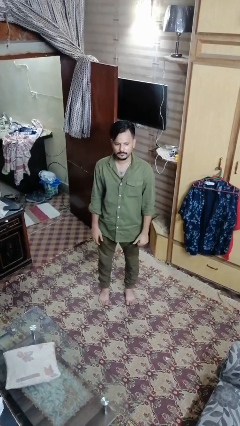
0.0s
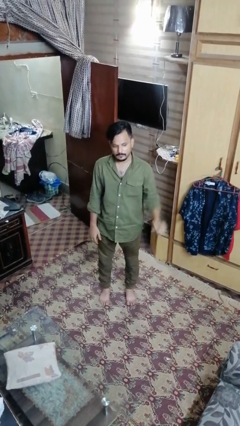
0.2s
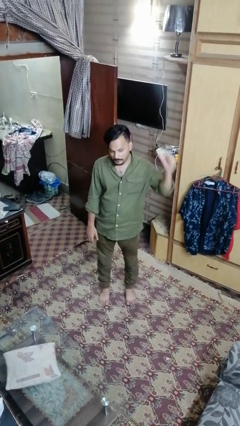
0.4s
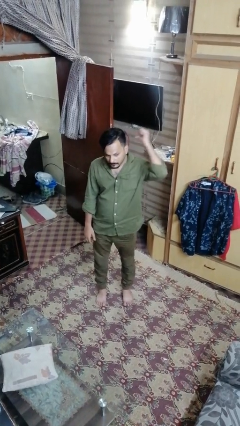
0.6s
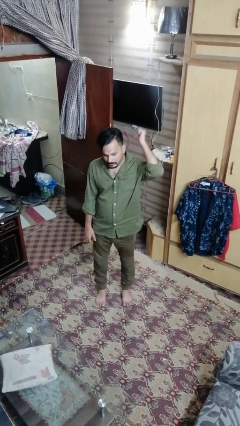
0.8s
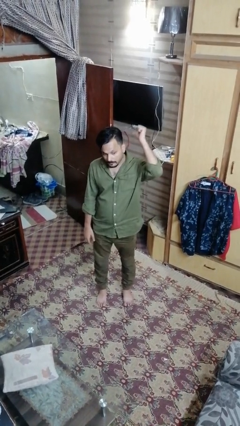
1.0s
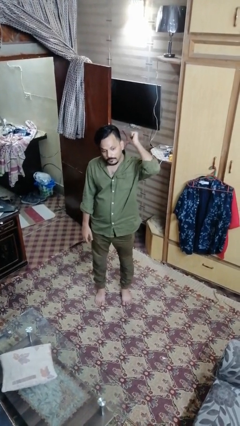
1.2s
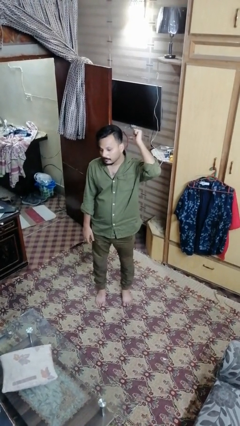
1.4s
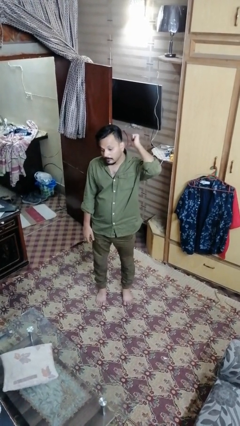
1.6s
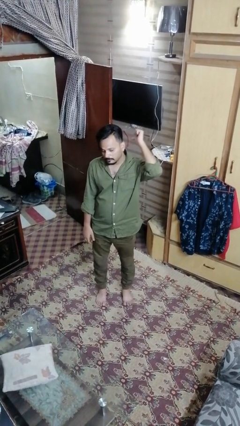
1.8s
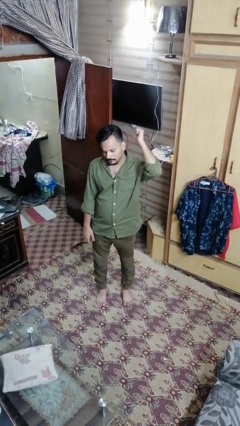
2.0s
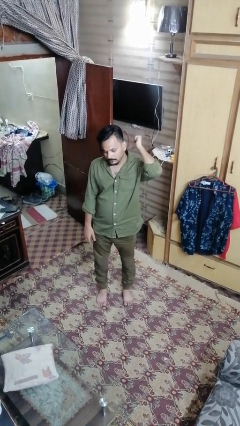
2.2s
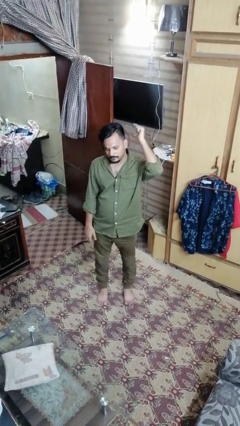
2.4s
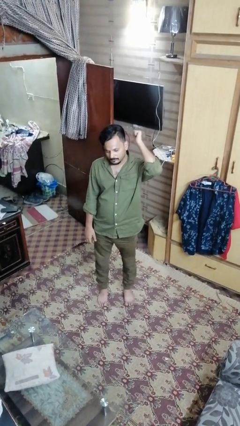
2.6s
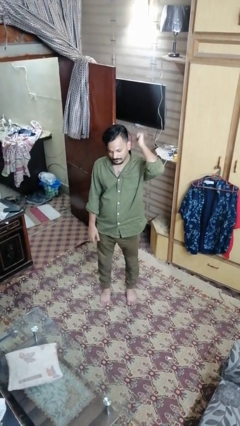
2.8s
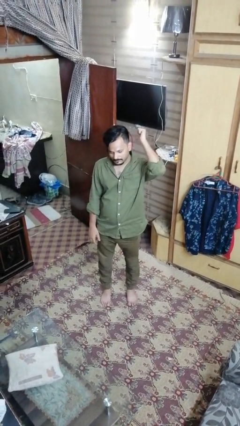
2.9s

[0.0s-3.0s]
person gestures behind me

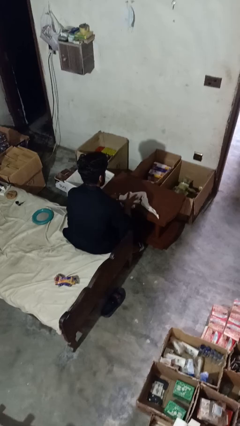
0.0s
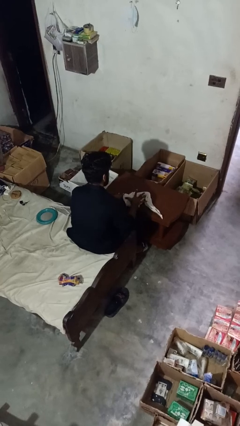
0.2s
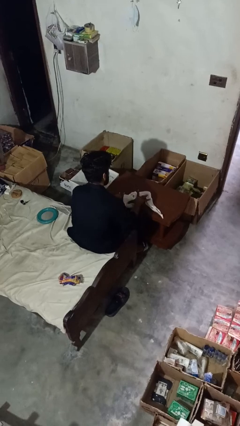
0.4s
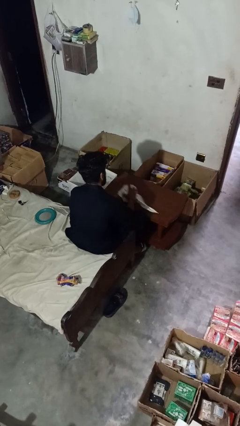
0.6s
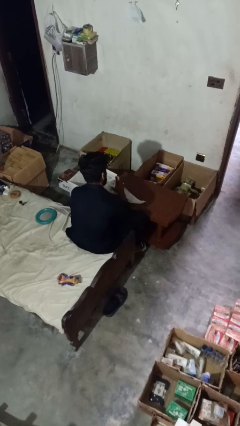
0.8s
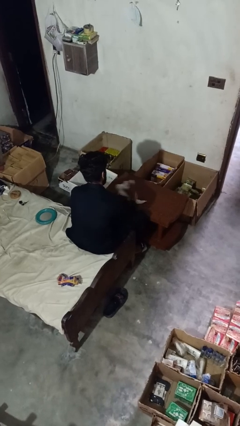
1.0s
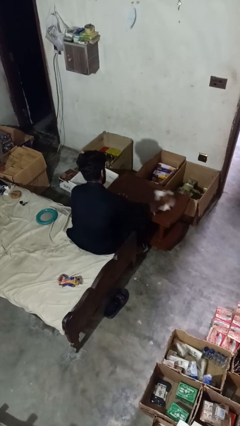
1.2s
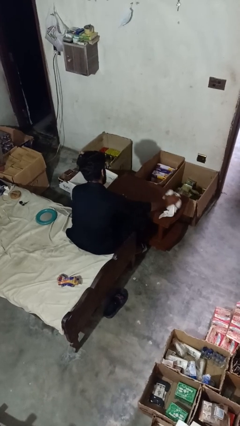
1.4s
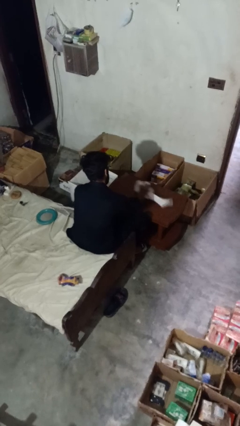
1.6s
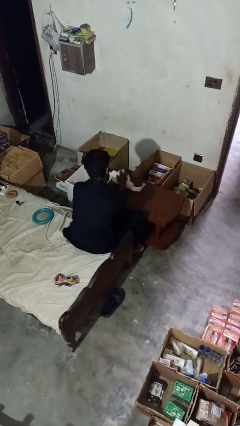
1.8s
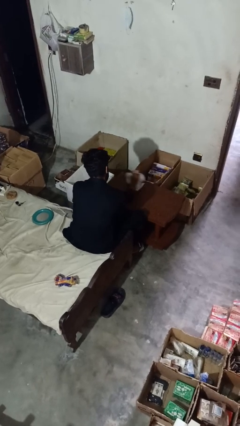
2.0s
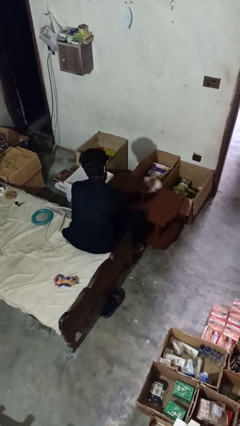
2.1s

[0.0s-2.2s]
person cleans table with rag

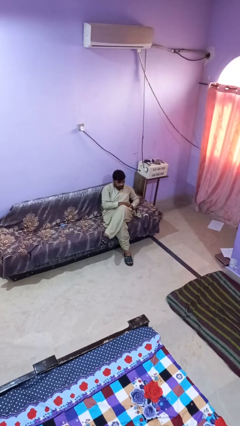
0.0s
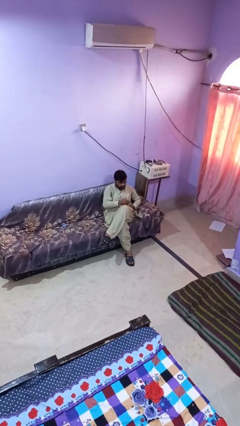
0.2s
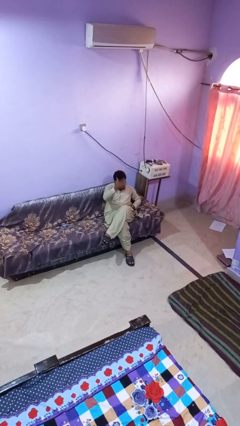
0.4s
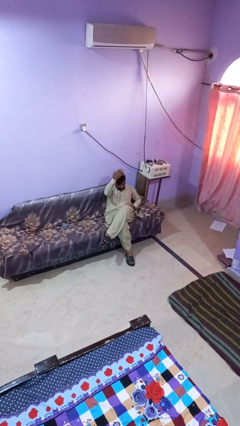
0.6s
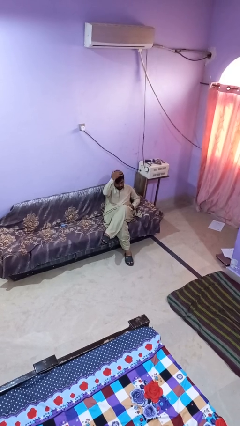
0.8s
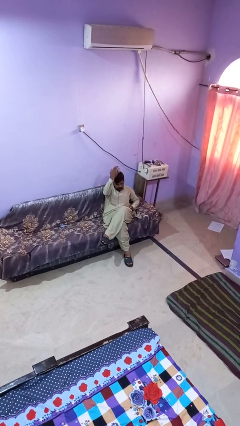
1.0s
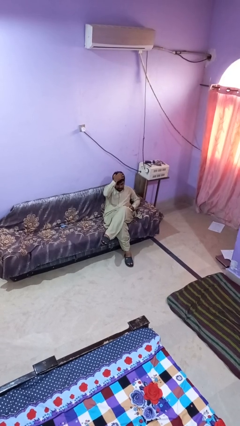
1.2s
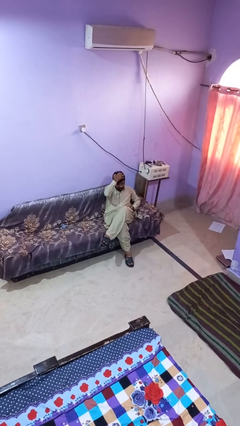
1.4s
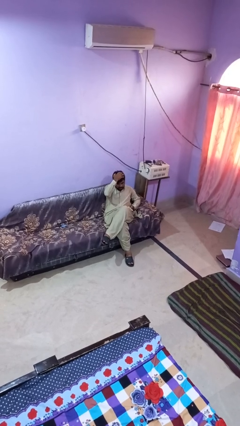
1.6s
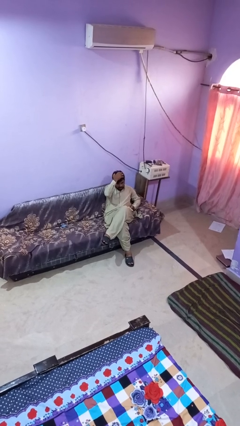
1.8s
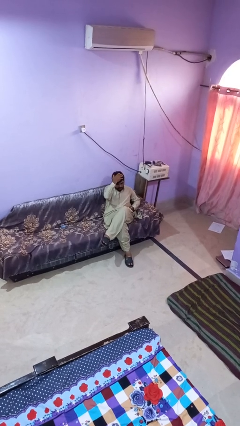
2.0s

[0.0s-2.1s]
person pats head

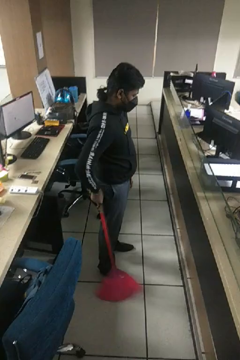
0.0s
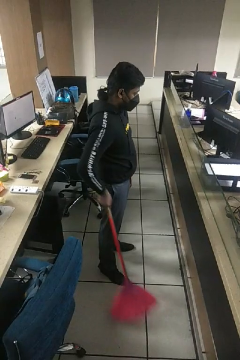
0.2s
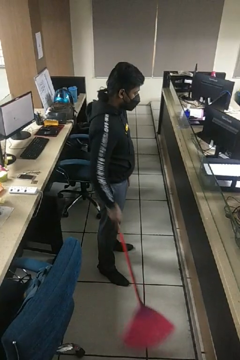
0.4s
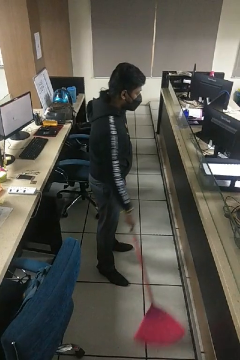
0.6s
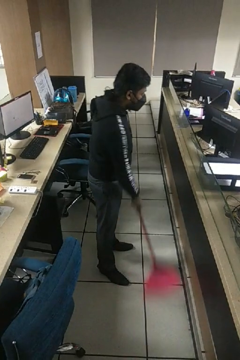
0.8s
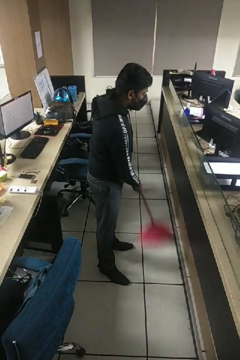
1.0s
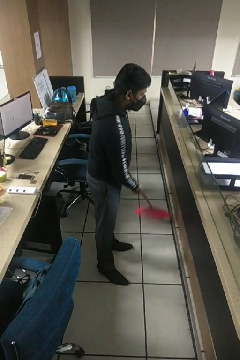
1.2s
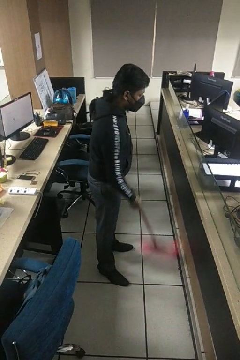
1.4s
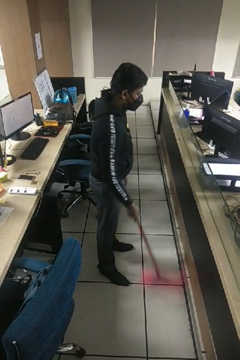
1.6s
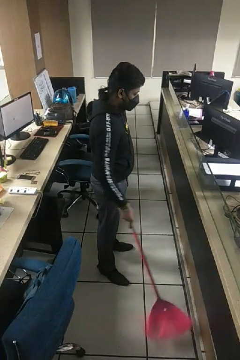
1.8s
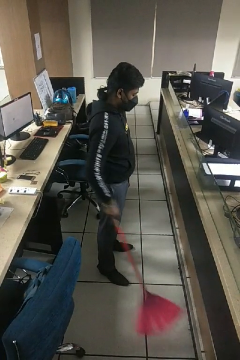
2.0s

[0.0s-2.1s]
person sweeps floor

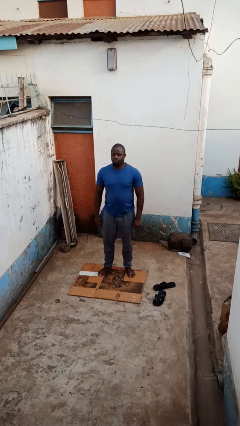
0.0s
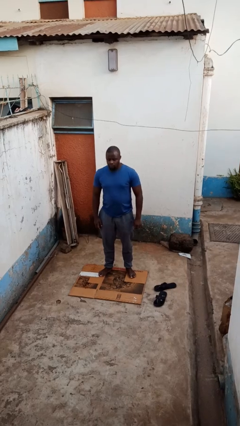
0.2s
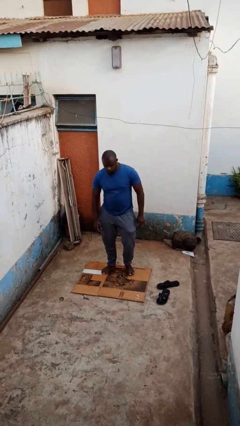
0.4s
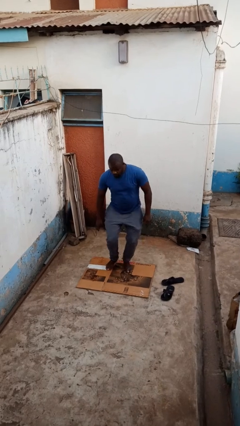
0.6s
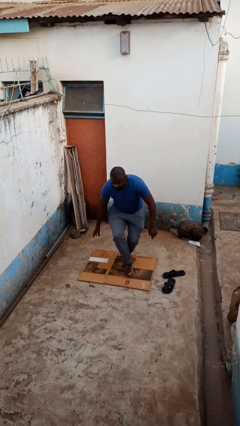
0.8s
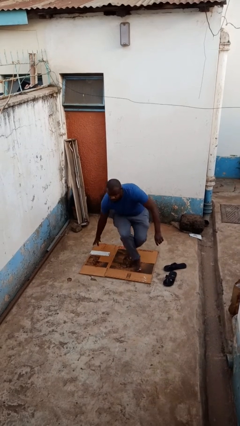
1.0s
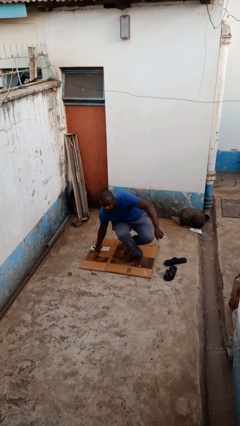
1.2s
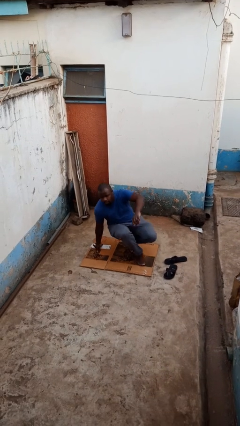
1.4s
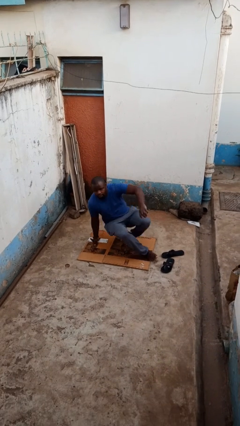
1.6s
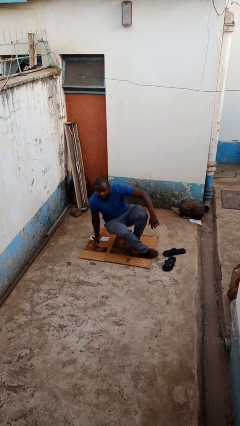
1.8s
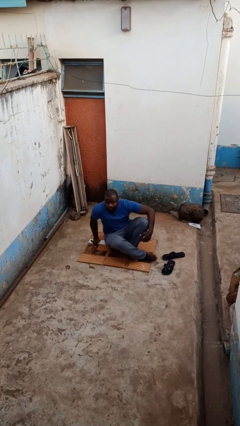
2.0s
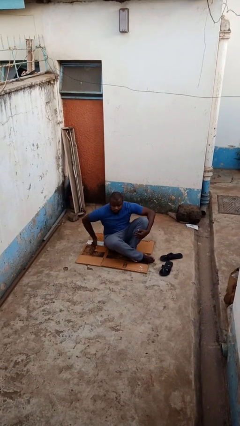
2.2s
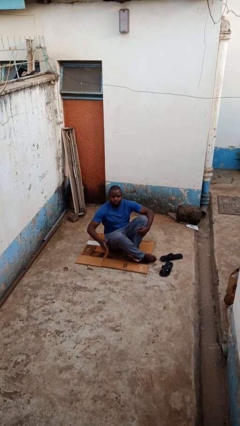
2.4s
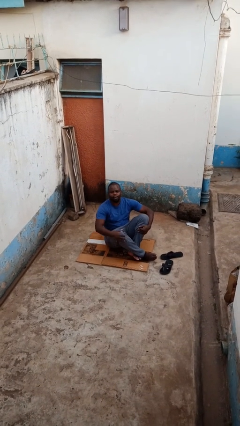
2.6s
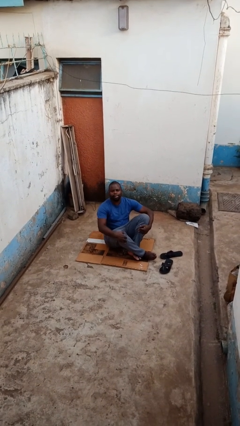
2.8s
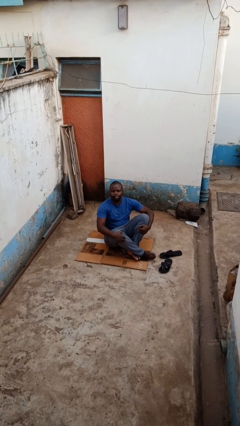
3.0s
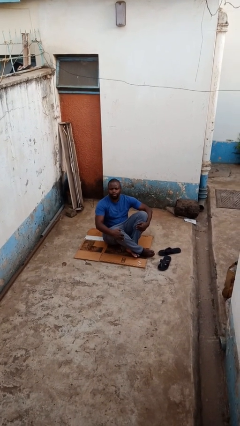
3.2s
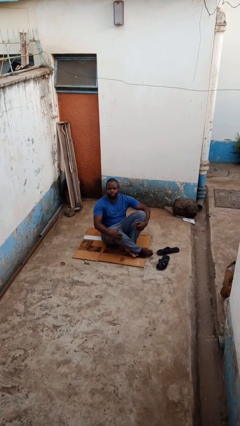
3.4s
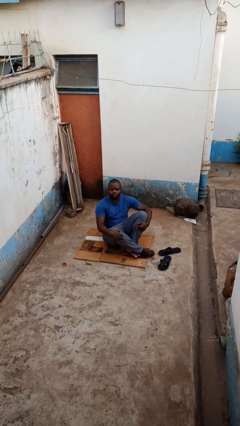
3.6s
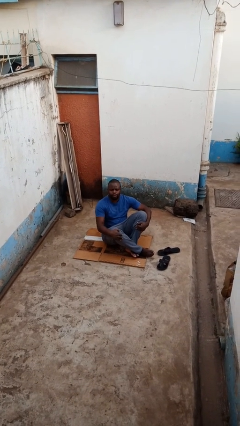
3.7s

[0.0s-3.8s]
person sits crisscross

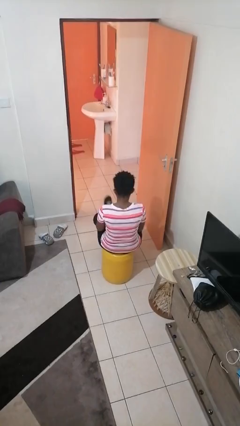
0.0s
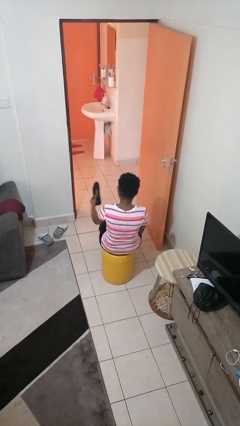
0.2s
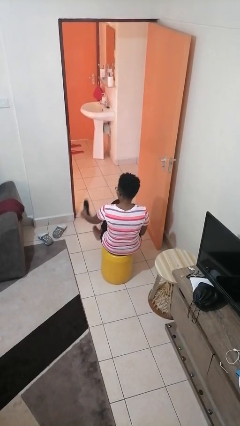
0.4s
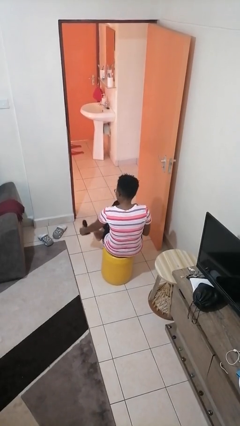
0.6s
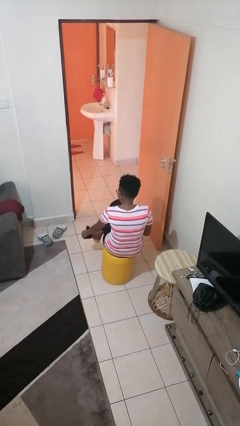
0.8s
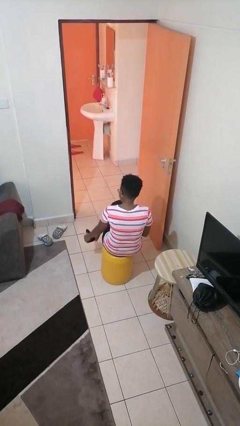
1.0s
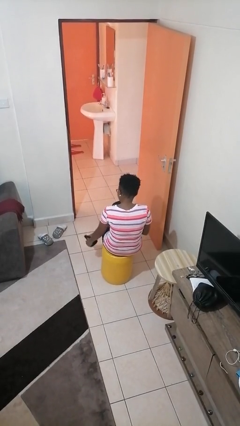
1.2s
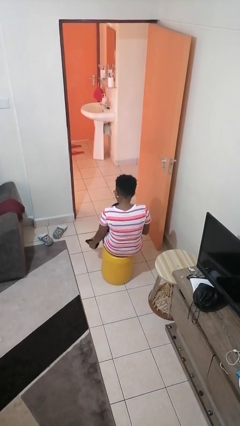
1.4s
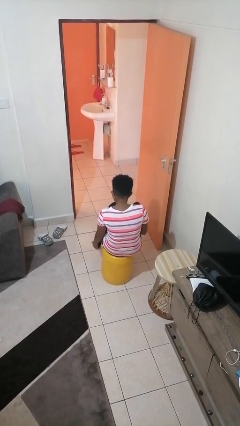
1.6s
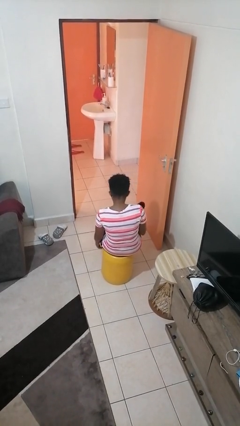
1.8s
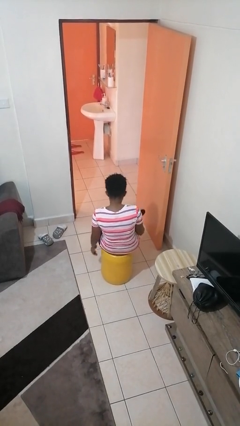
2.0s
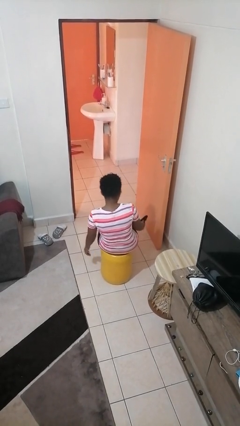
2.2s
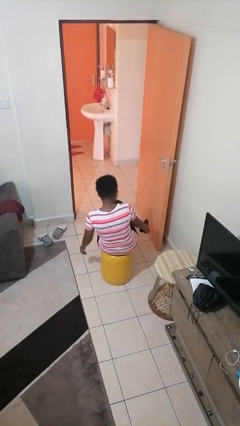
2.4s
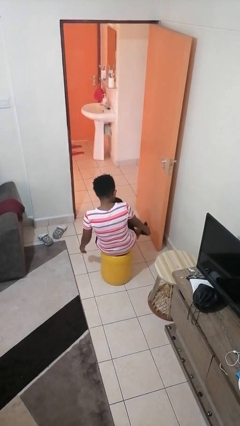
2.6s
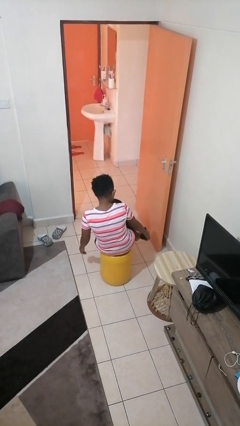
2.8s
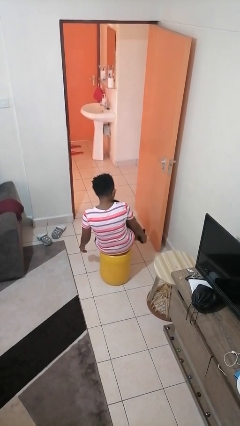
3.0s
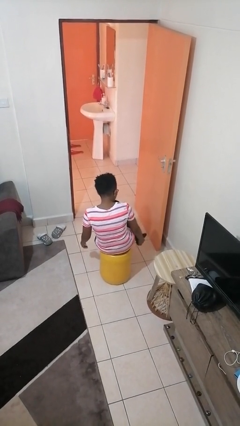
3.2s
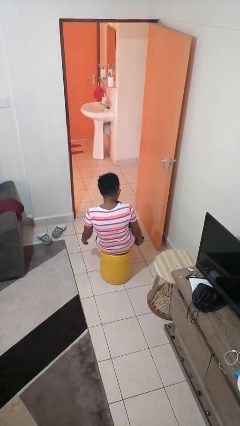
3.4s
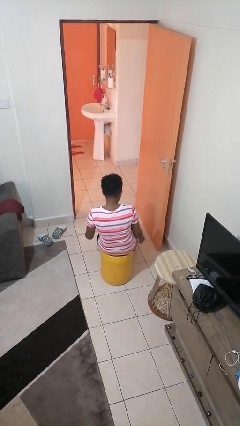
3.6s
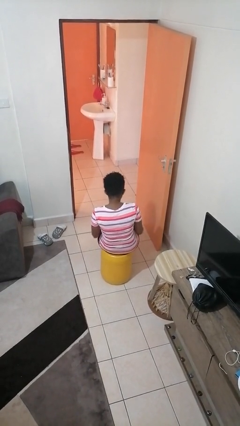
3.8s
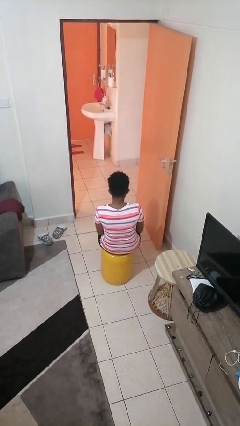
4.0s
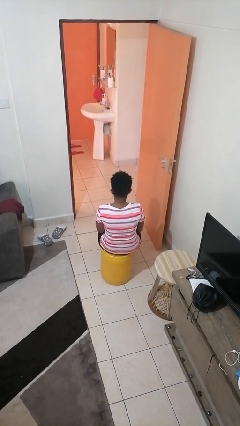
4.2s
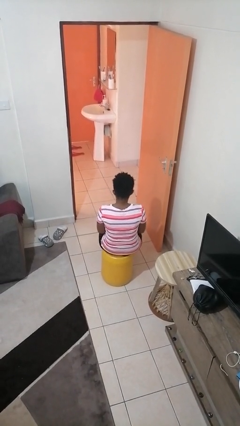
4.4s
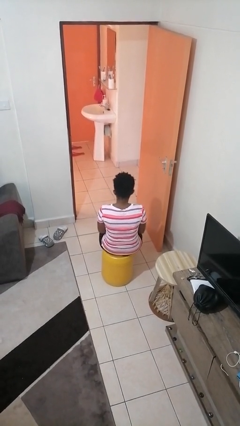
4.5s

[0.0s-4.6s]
person puts on shoes

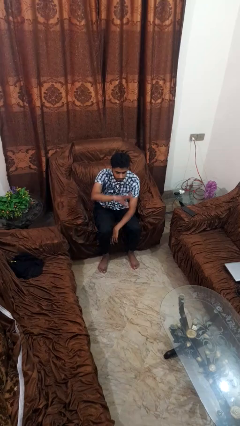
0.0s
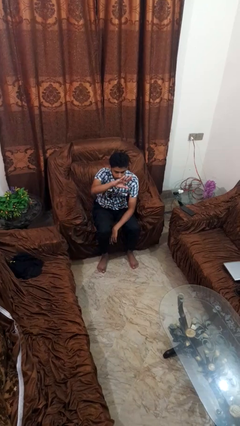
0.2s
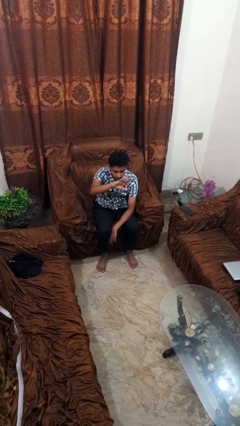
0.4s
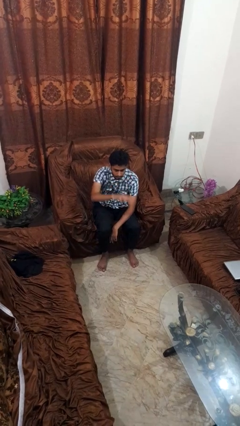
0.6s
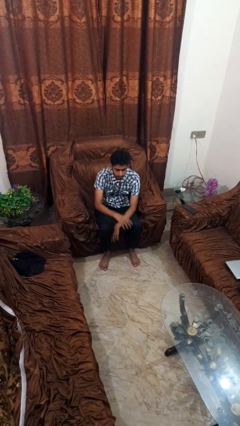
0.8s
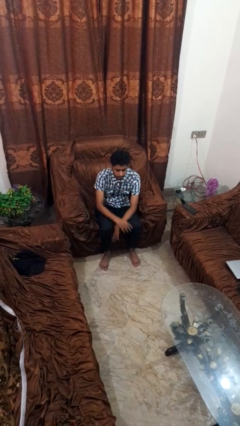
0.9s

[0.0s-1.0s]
person gestures swipe up
